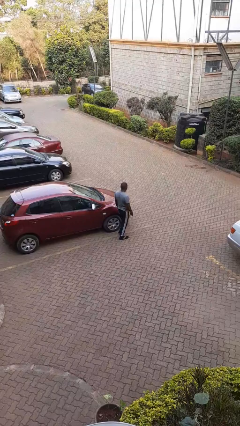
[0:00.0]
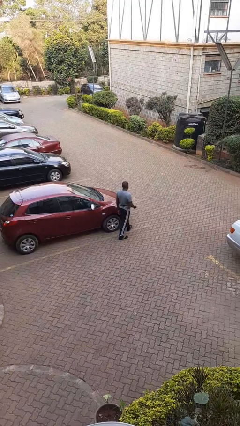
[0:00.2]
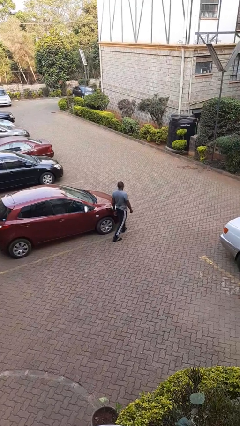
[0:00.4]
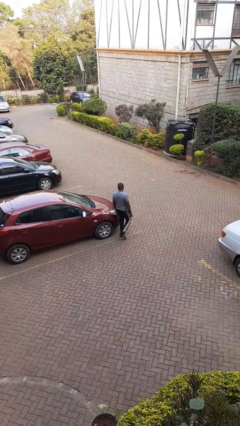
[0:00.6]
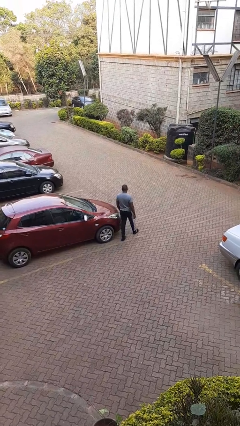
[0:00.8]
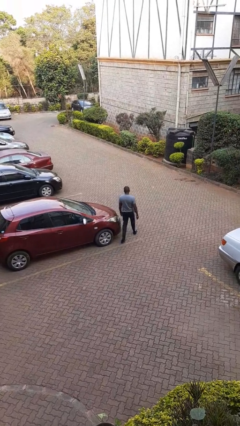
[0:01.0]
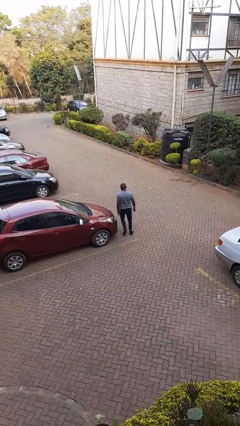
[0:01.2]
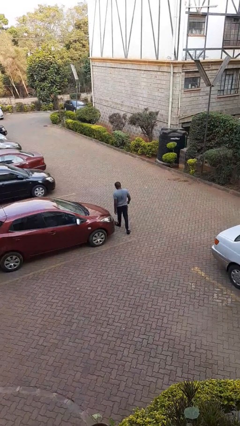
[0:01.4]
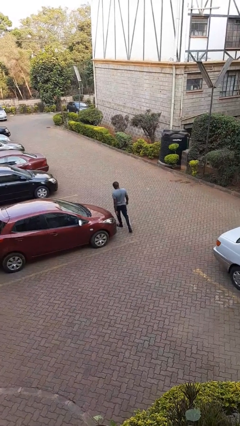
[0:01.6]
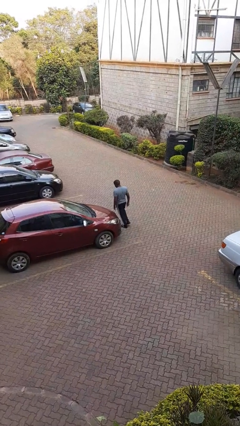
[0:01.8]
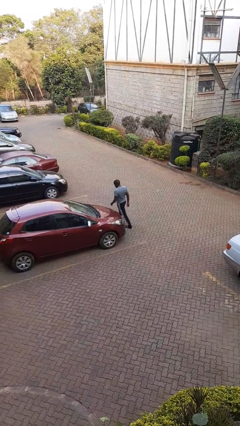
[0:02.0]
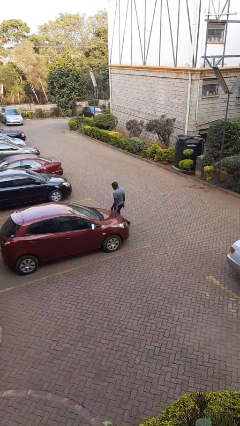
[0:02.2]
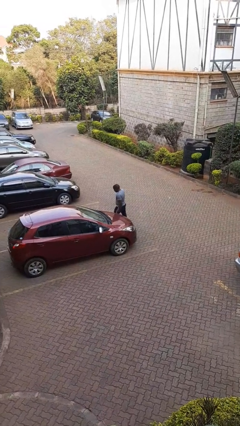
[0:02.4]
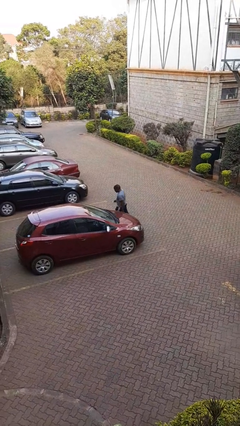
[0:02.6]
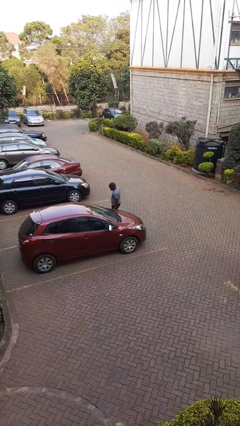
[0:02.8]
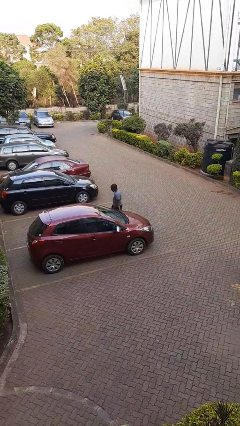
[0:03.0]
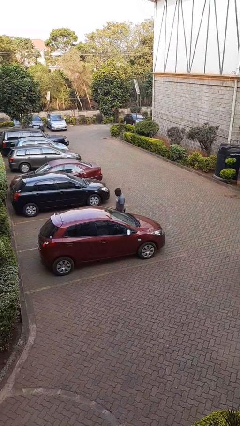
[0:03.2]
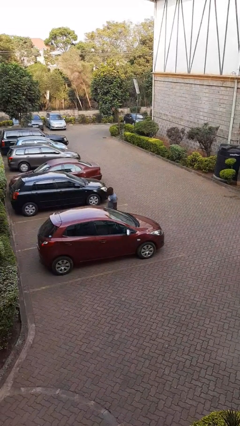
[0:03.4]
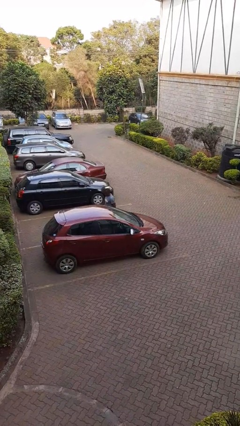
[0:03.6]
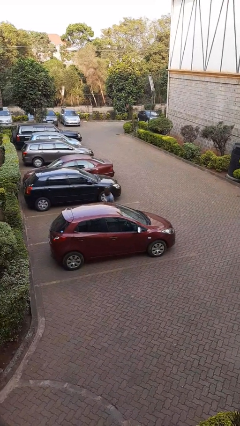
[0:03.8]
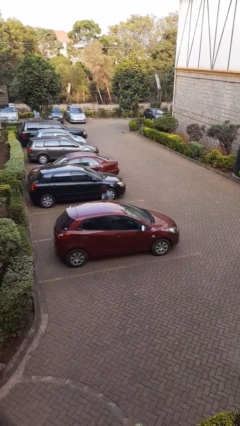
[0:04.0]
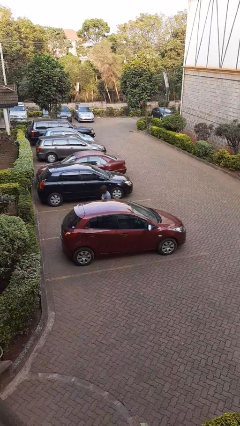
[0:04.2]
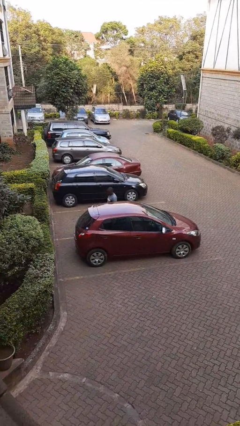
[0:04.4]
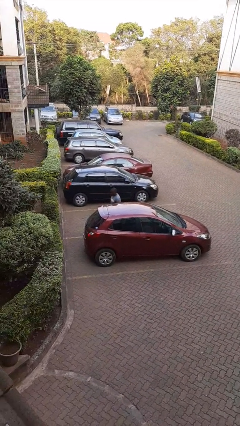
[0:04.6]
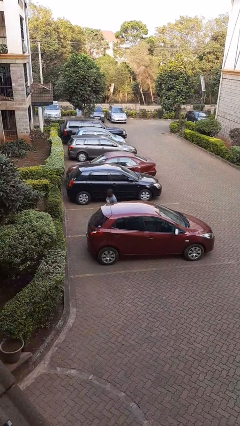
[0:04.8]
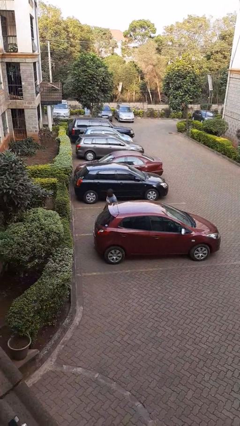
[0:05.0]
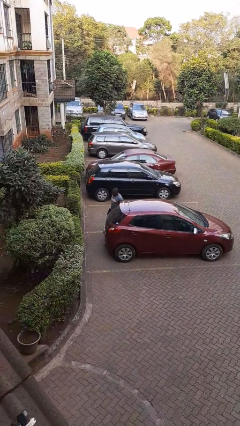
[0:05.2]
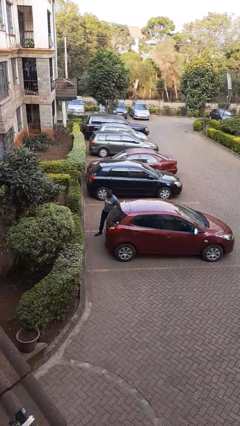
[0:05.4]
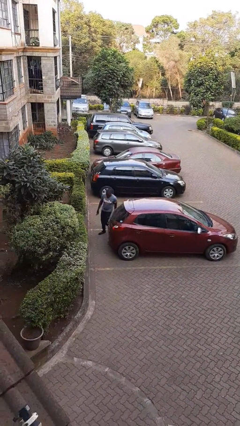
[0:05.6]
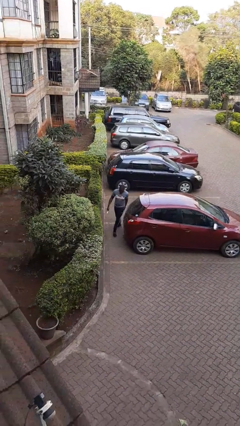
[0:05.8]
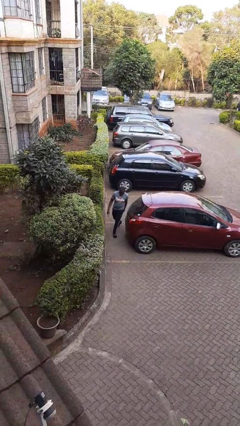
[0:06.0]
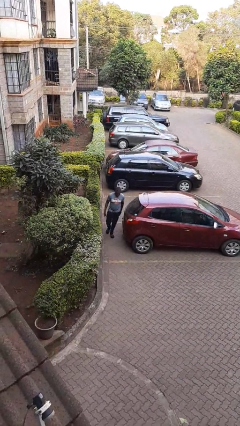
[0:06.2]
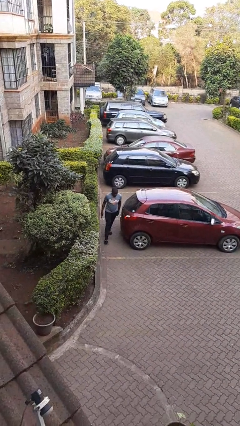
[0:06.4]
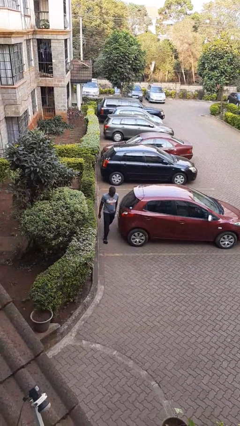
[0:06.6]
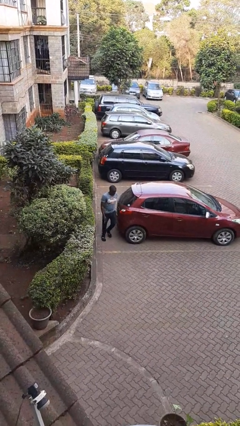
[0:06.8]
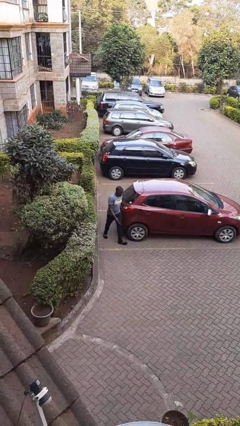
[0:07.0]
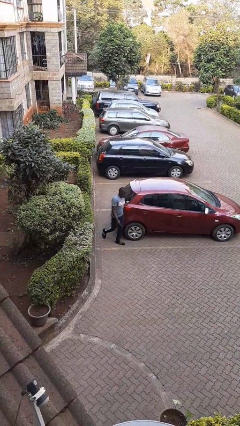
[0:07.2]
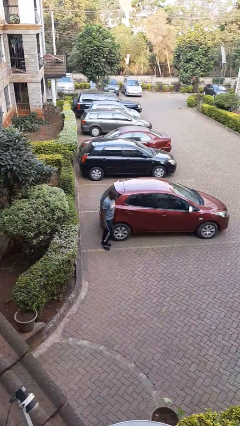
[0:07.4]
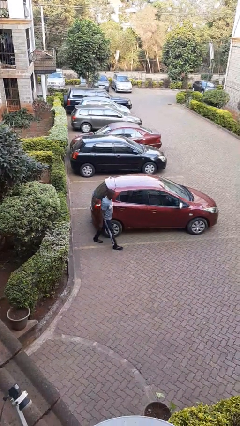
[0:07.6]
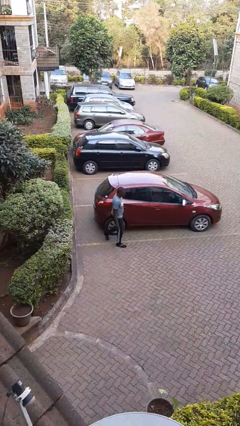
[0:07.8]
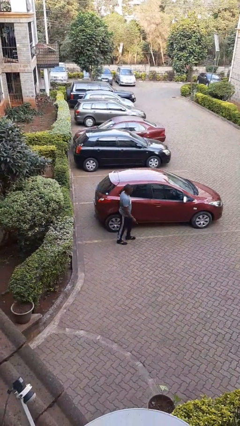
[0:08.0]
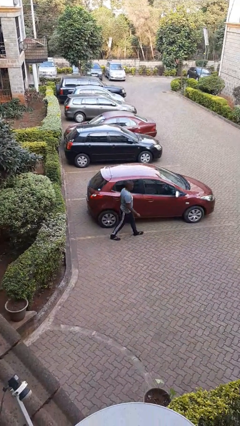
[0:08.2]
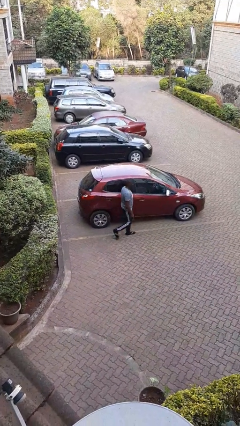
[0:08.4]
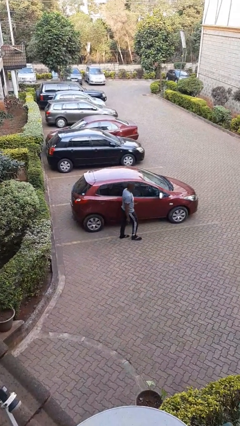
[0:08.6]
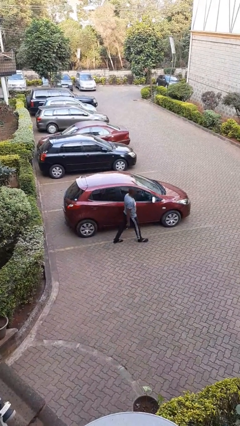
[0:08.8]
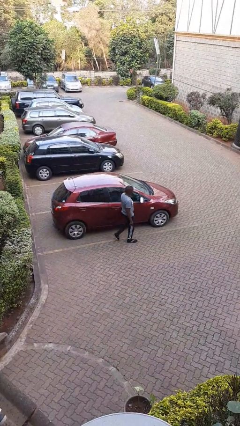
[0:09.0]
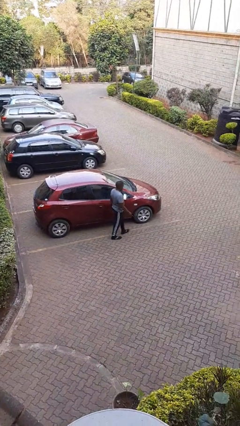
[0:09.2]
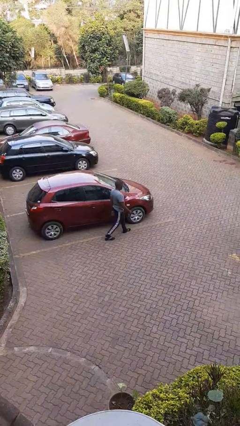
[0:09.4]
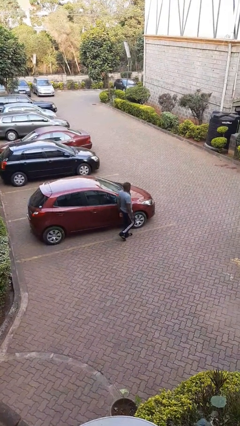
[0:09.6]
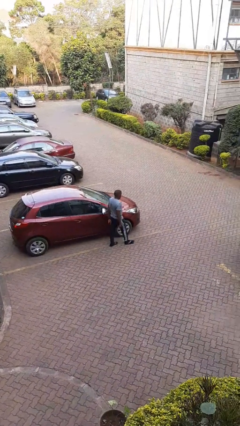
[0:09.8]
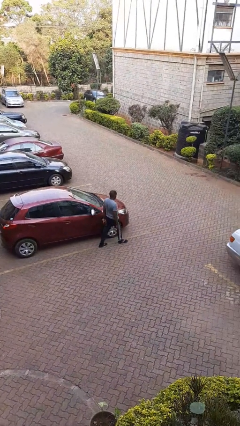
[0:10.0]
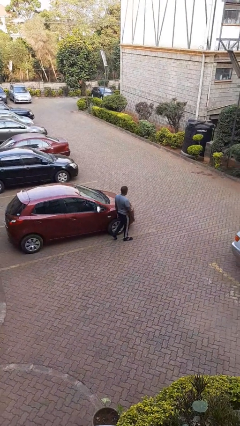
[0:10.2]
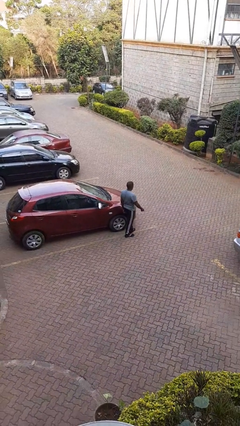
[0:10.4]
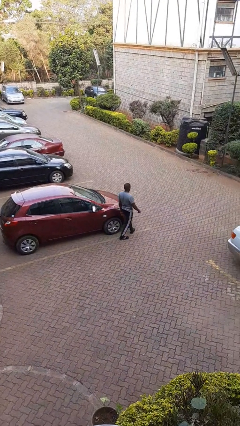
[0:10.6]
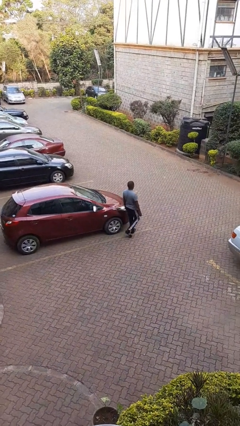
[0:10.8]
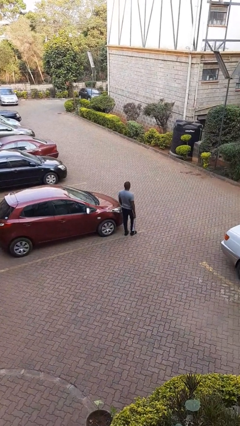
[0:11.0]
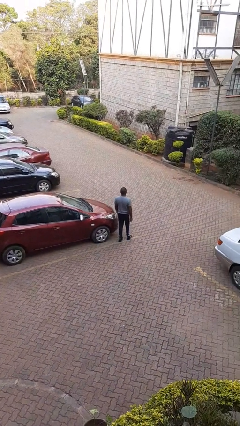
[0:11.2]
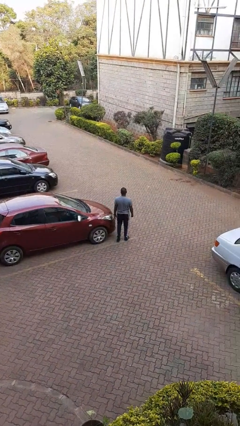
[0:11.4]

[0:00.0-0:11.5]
person walks around car

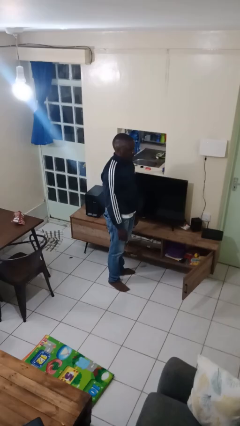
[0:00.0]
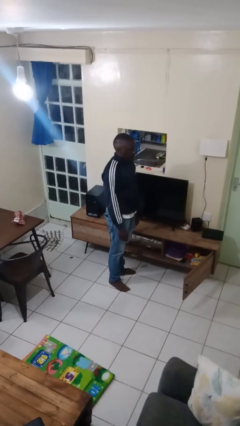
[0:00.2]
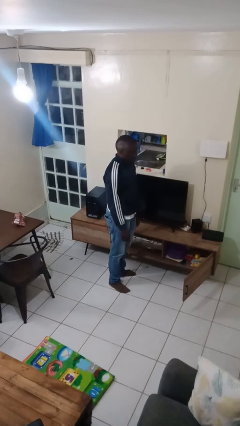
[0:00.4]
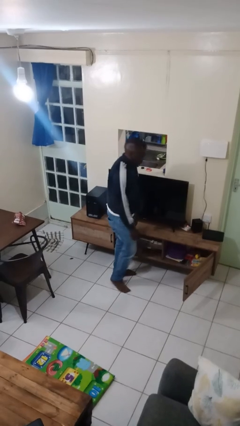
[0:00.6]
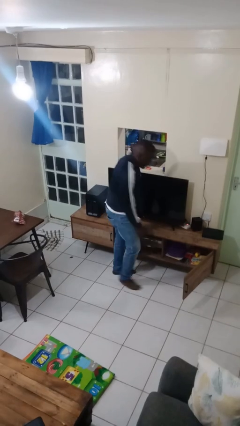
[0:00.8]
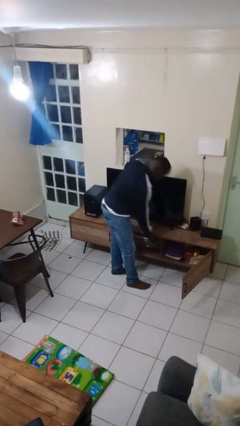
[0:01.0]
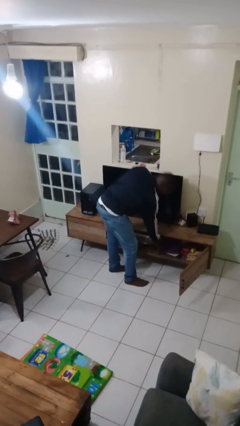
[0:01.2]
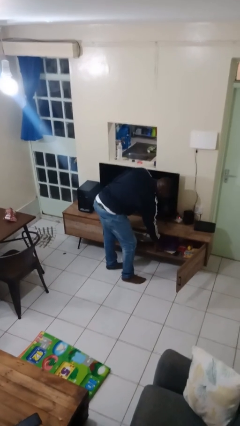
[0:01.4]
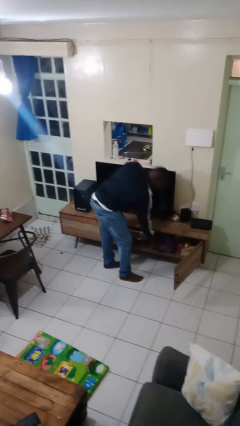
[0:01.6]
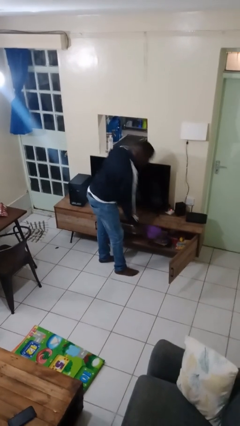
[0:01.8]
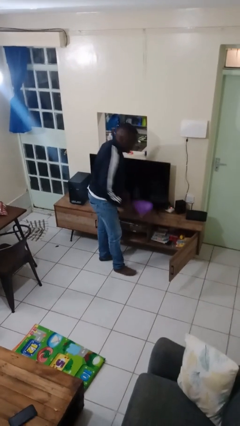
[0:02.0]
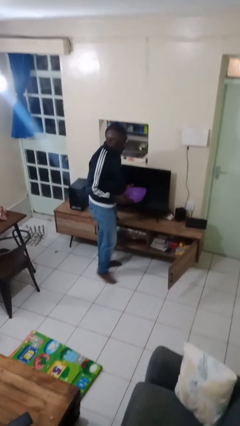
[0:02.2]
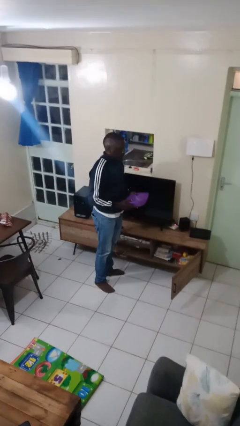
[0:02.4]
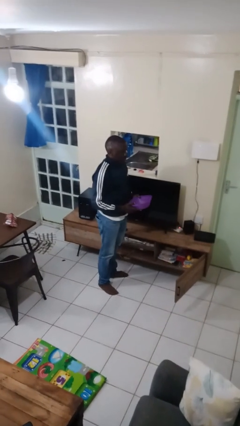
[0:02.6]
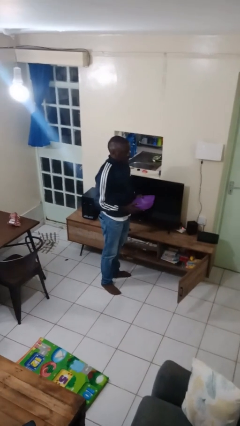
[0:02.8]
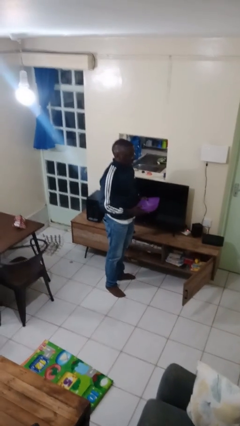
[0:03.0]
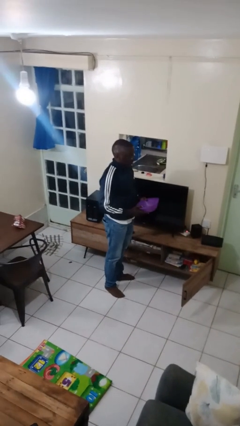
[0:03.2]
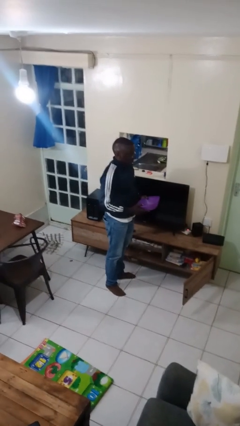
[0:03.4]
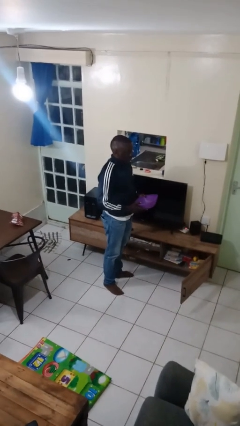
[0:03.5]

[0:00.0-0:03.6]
person picks up object from cabinet

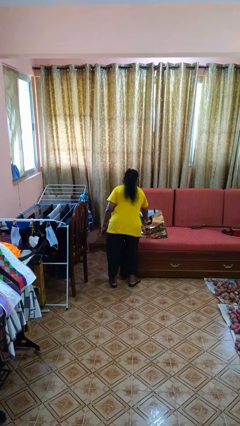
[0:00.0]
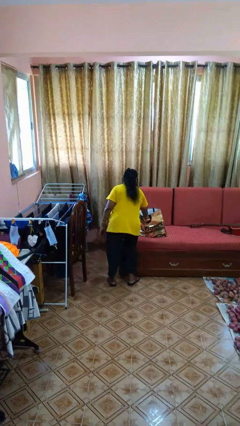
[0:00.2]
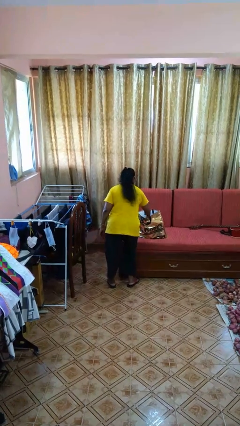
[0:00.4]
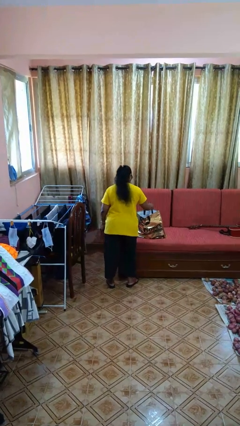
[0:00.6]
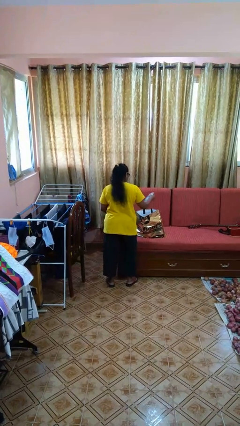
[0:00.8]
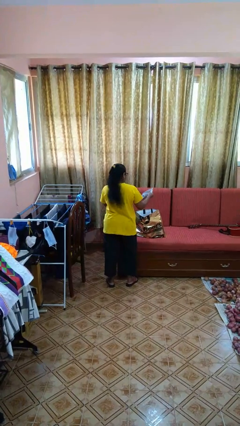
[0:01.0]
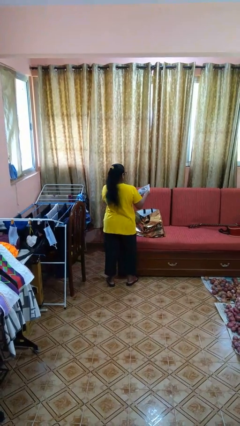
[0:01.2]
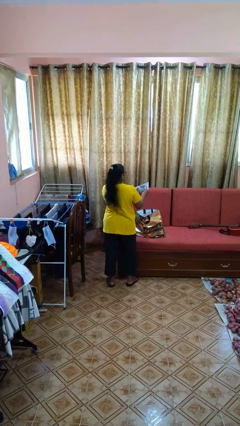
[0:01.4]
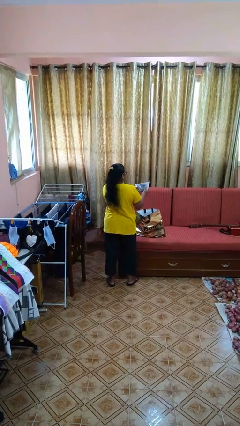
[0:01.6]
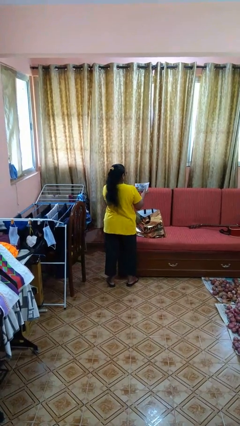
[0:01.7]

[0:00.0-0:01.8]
person takes object from bag

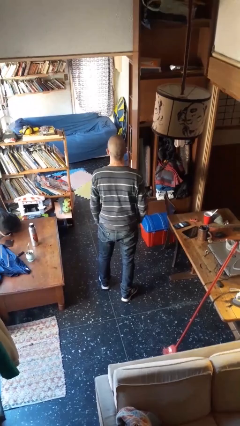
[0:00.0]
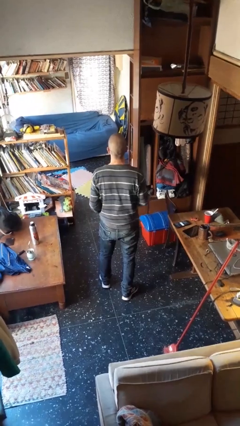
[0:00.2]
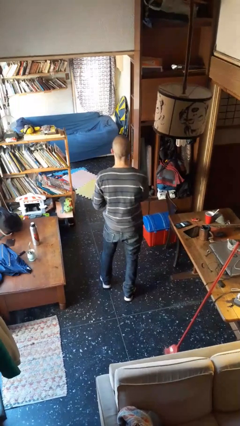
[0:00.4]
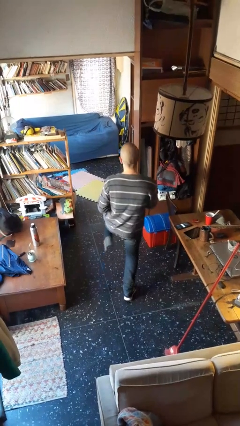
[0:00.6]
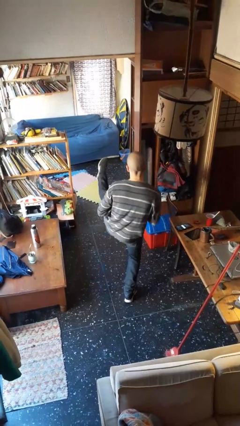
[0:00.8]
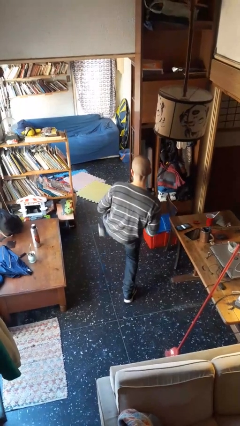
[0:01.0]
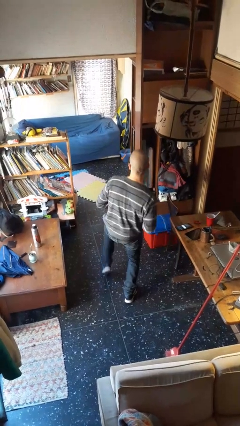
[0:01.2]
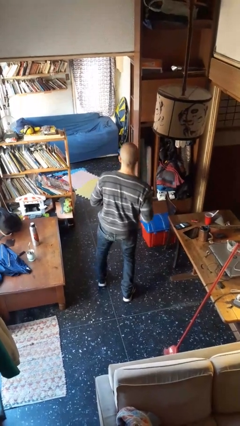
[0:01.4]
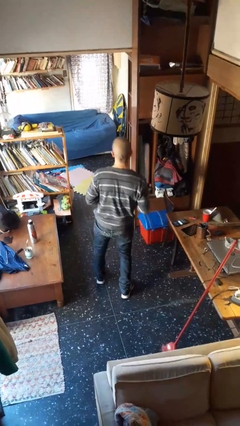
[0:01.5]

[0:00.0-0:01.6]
person karate kicks
